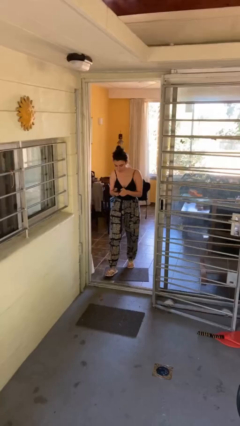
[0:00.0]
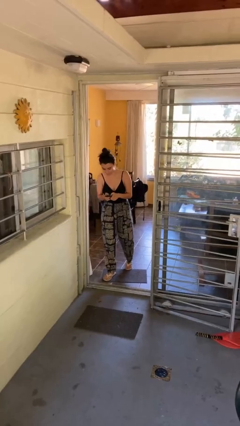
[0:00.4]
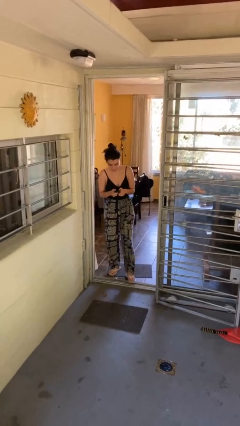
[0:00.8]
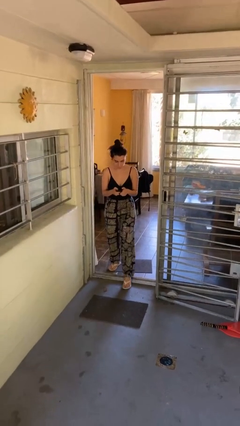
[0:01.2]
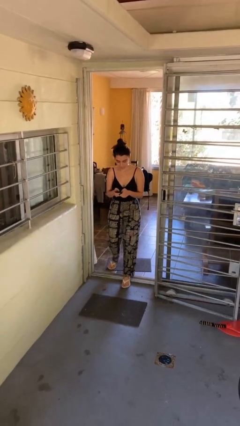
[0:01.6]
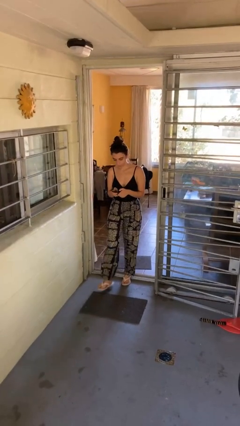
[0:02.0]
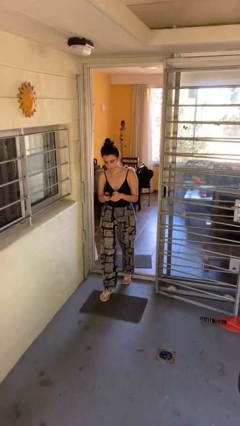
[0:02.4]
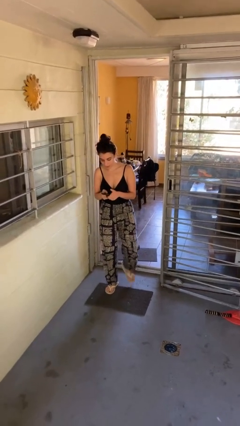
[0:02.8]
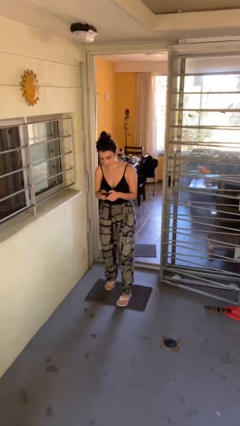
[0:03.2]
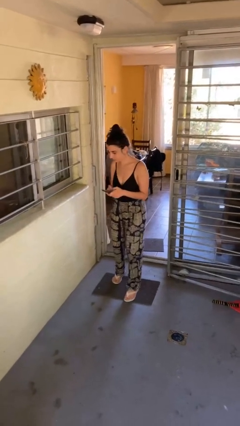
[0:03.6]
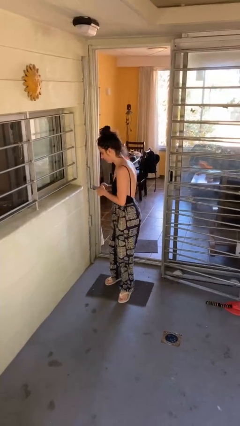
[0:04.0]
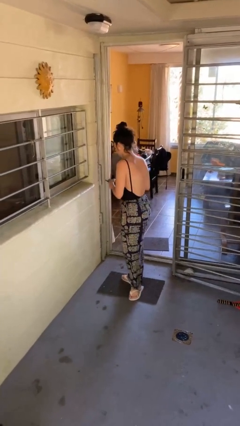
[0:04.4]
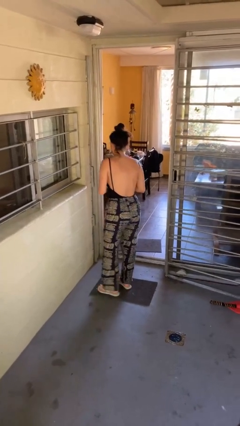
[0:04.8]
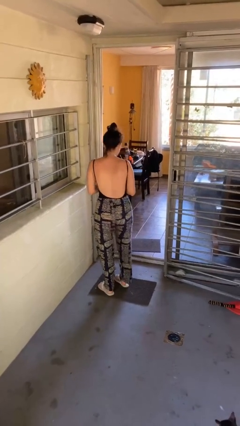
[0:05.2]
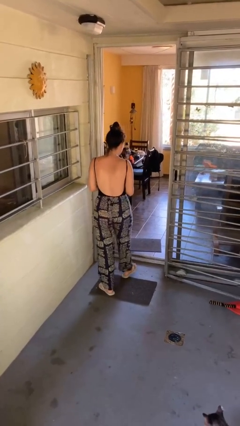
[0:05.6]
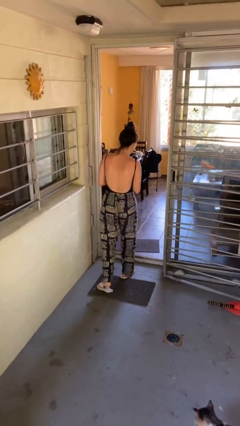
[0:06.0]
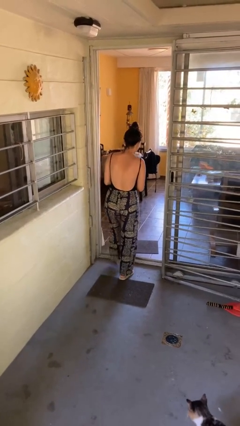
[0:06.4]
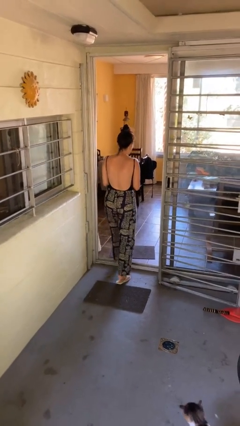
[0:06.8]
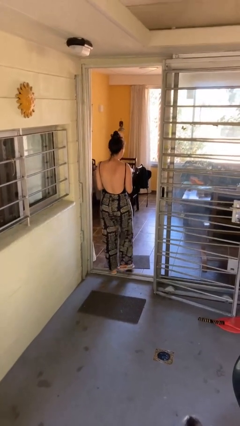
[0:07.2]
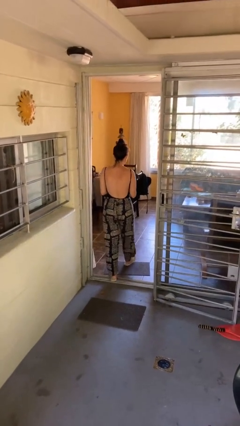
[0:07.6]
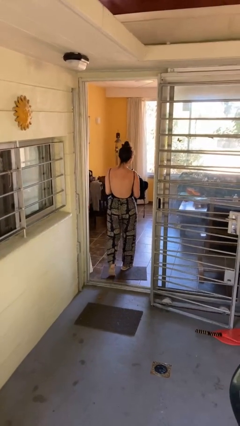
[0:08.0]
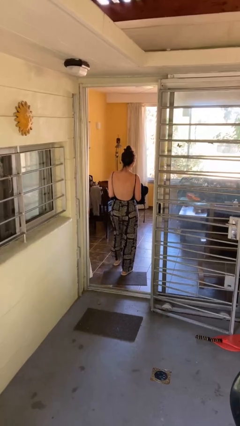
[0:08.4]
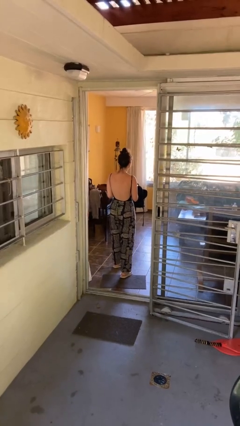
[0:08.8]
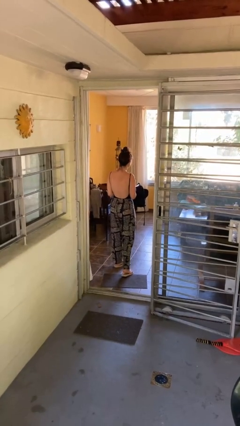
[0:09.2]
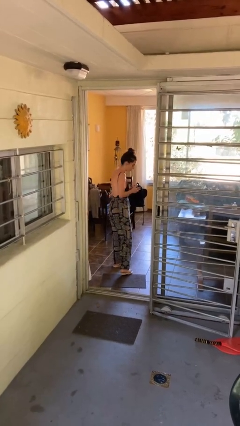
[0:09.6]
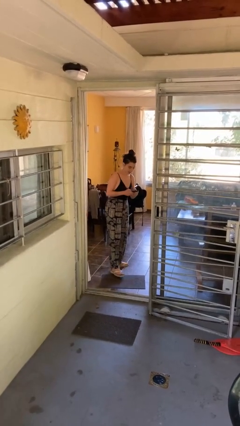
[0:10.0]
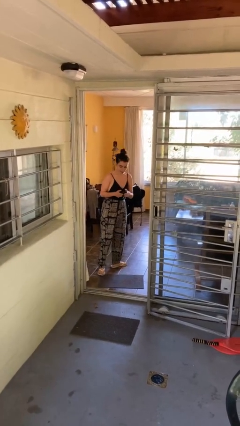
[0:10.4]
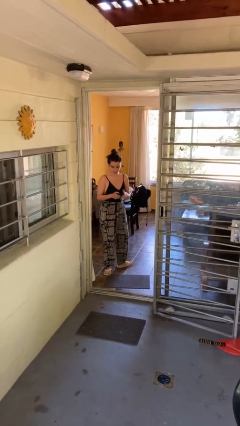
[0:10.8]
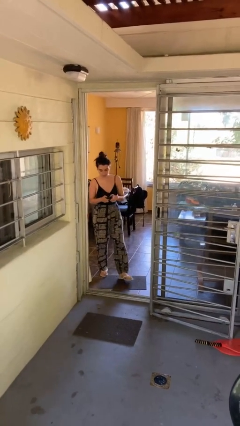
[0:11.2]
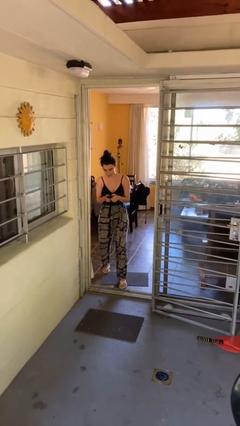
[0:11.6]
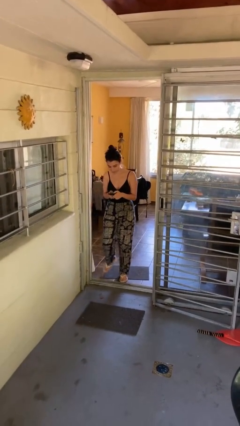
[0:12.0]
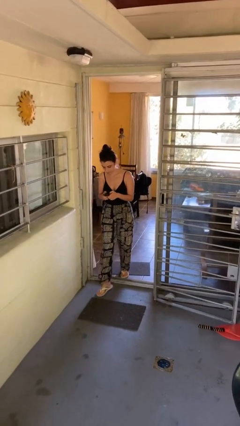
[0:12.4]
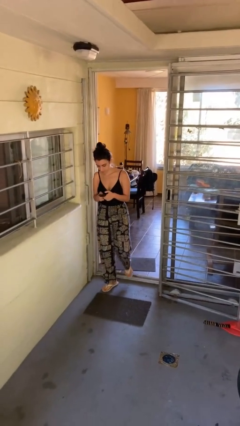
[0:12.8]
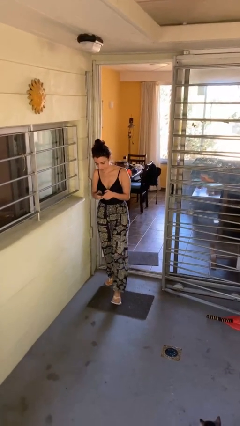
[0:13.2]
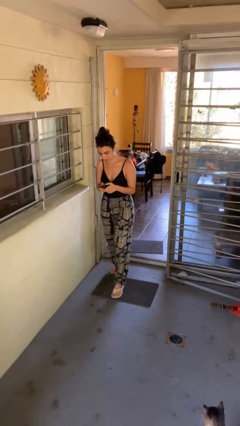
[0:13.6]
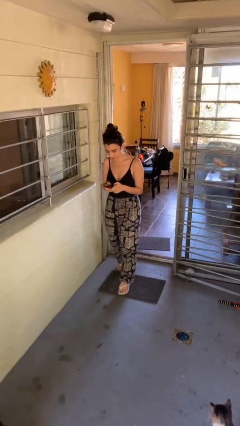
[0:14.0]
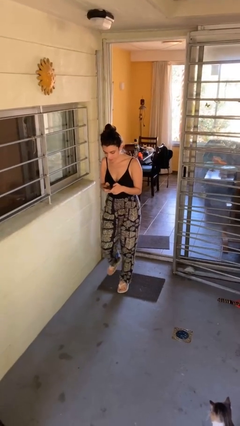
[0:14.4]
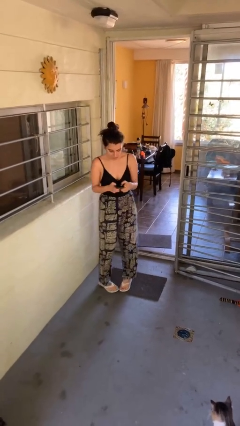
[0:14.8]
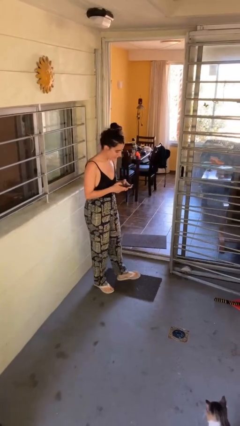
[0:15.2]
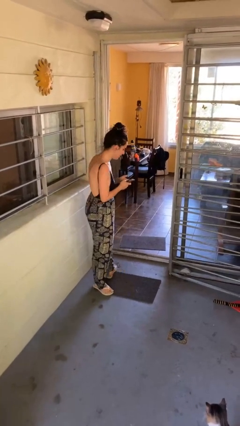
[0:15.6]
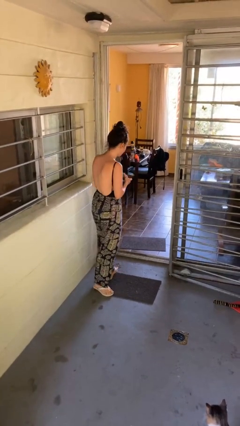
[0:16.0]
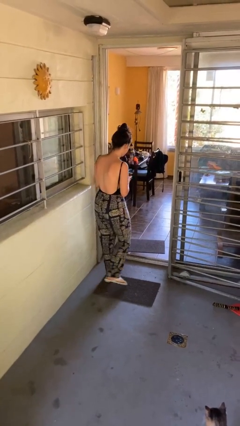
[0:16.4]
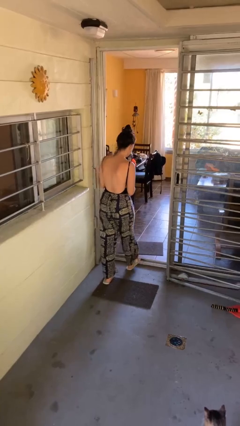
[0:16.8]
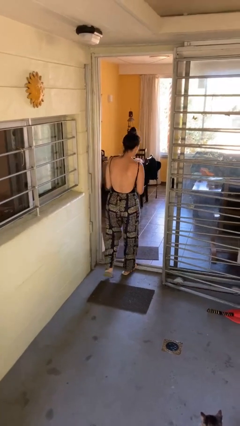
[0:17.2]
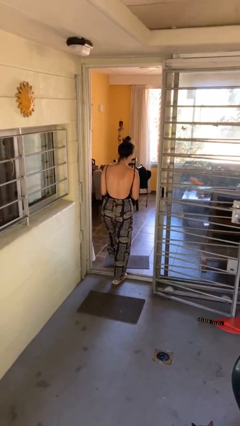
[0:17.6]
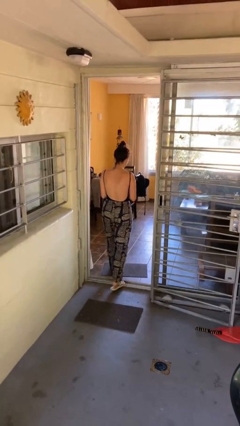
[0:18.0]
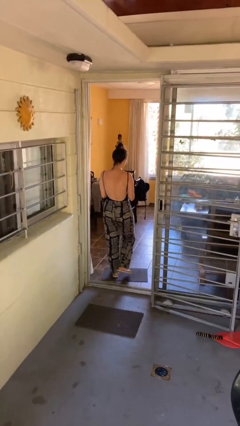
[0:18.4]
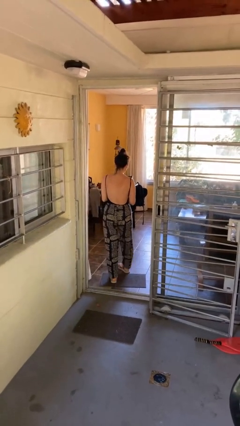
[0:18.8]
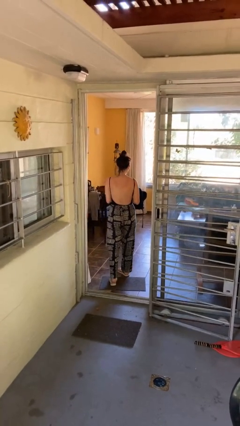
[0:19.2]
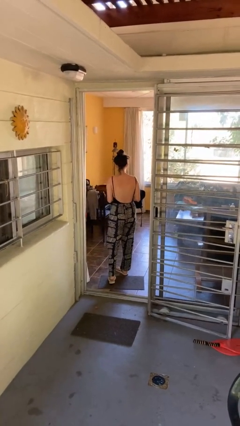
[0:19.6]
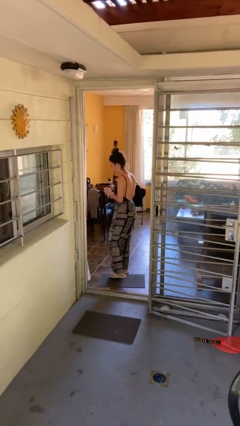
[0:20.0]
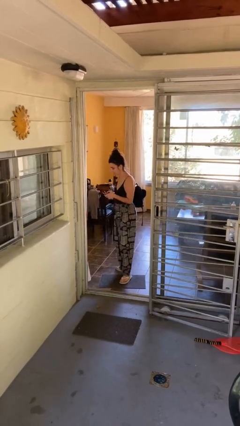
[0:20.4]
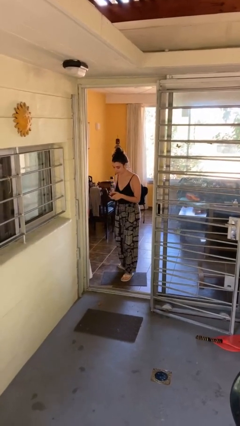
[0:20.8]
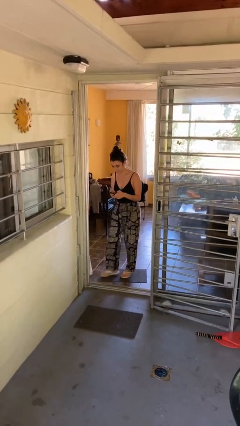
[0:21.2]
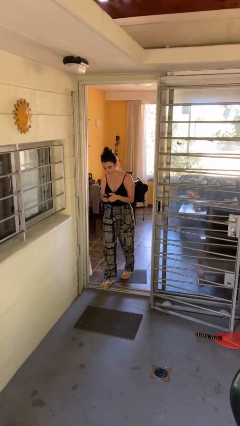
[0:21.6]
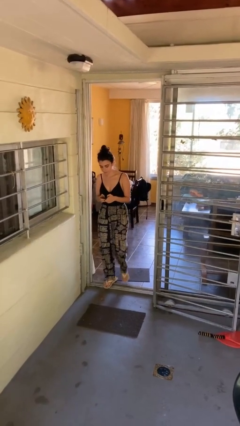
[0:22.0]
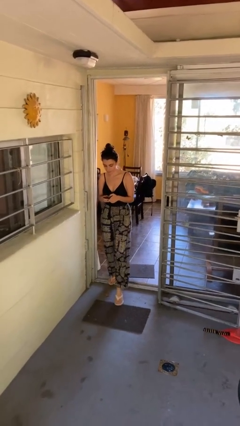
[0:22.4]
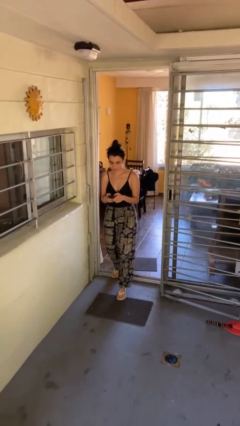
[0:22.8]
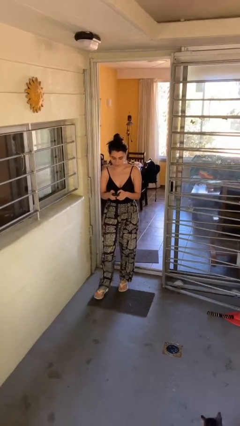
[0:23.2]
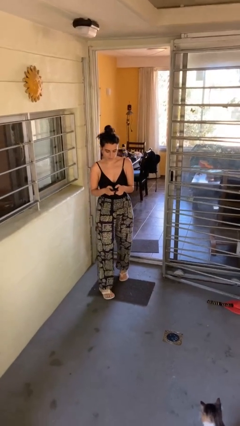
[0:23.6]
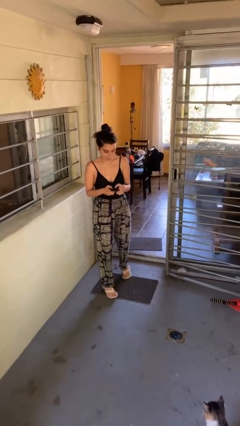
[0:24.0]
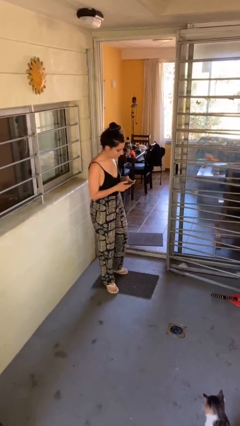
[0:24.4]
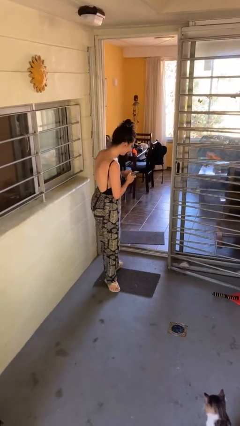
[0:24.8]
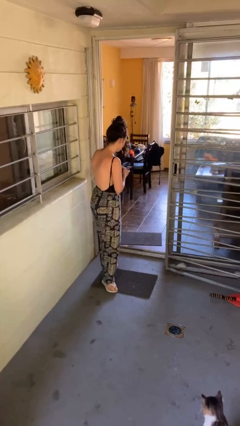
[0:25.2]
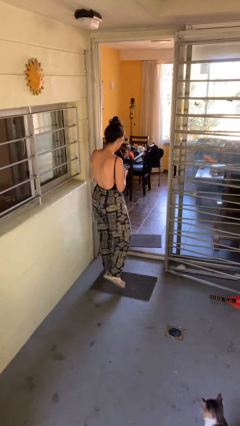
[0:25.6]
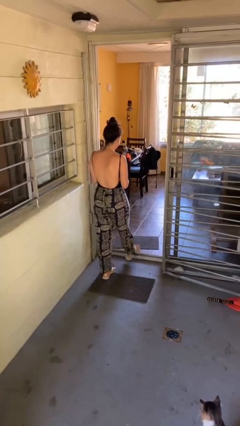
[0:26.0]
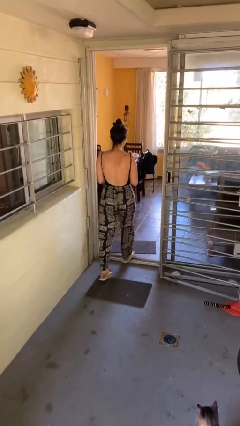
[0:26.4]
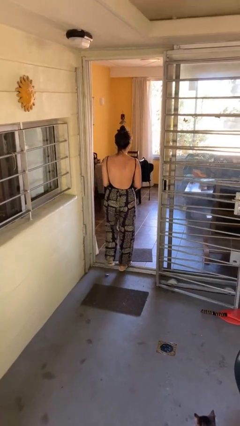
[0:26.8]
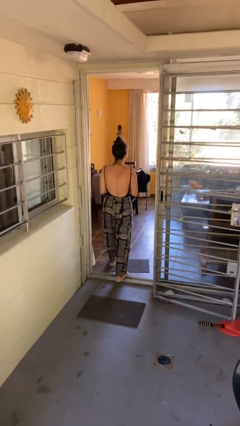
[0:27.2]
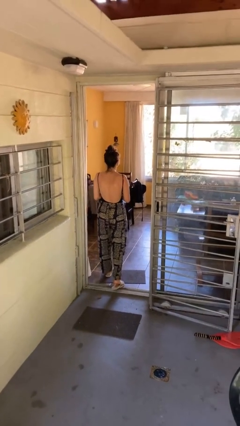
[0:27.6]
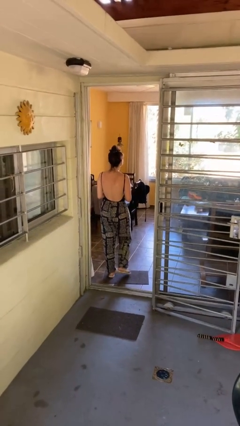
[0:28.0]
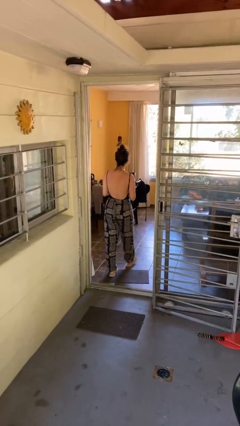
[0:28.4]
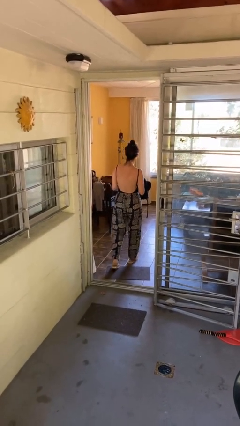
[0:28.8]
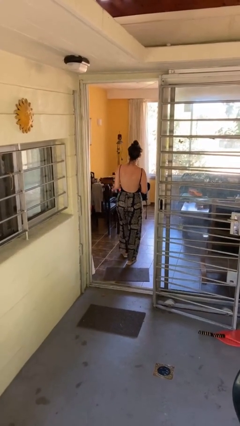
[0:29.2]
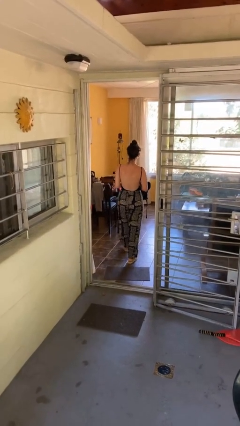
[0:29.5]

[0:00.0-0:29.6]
person texts on phone

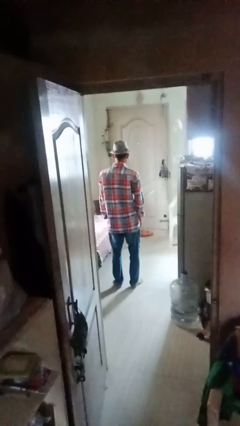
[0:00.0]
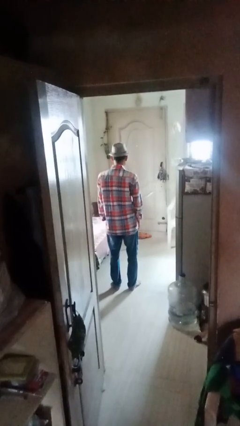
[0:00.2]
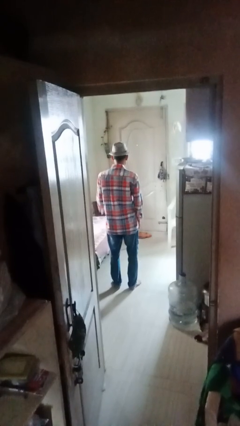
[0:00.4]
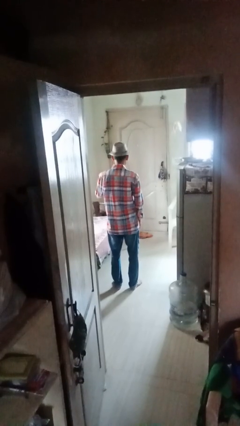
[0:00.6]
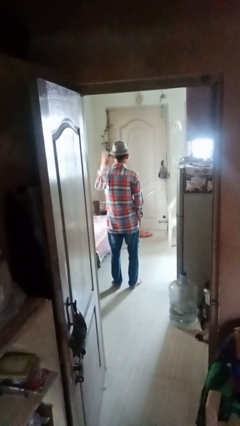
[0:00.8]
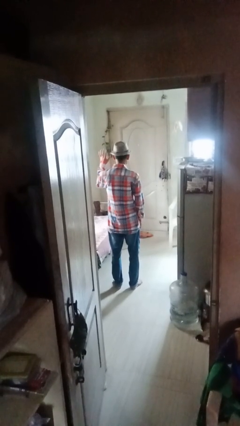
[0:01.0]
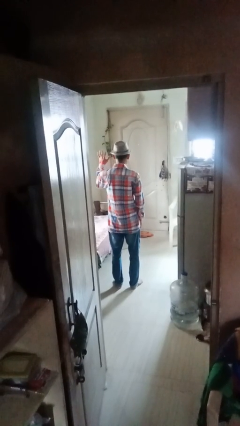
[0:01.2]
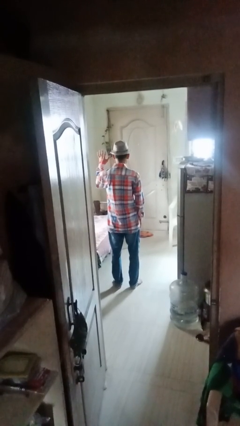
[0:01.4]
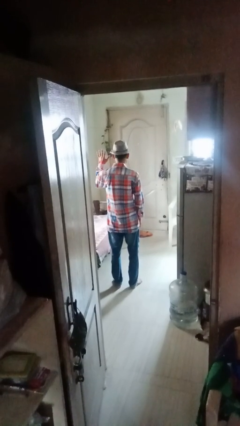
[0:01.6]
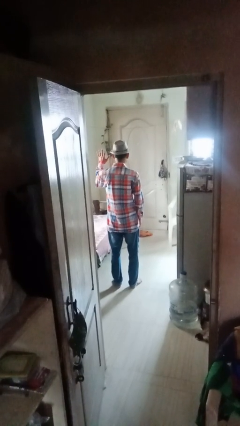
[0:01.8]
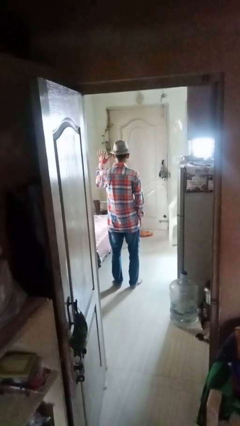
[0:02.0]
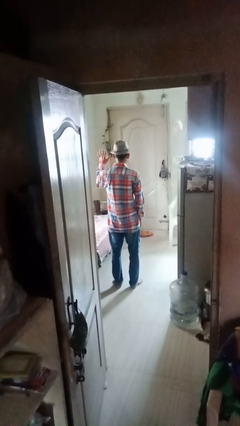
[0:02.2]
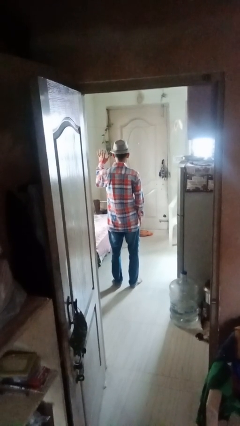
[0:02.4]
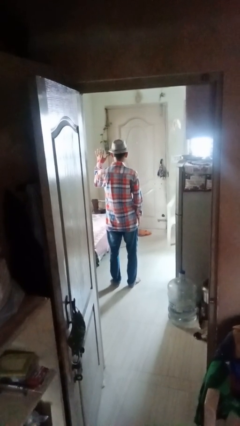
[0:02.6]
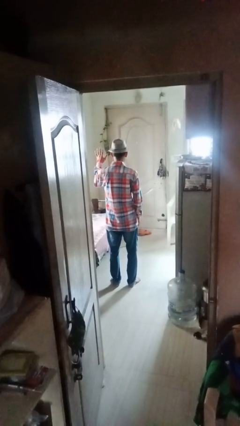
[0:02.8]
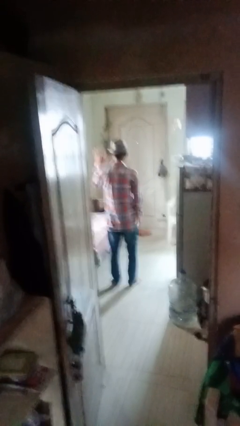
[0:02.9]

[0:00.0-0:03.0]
person gestures number five

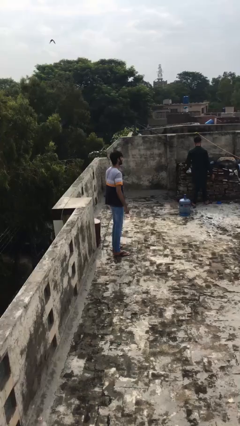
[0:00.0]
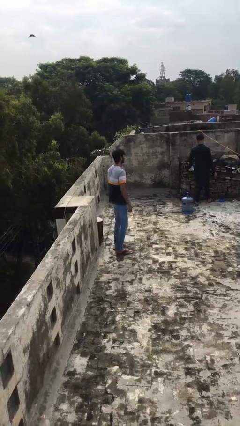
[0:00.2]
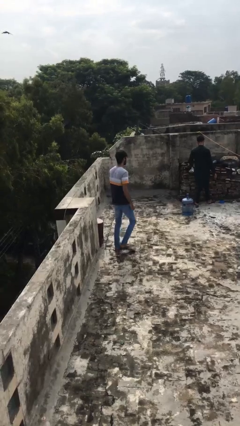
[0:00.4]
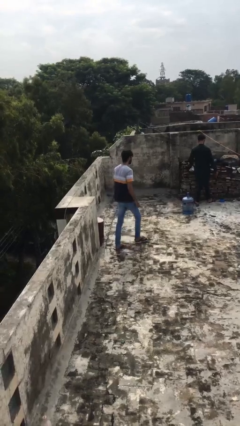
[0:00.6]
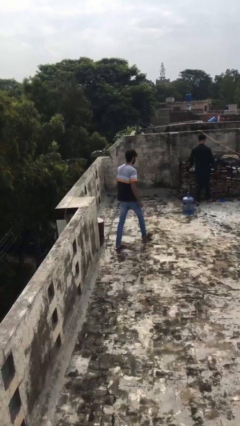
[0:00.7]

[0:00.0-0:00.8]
person steals object from person
